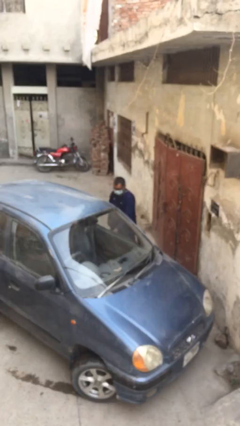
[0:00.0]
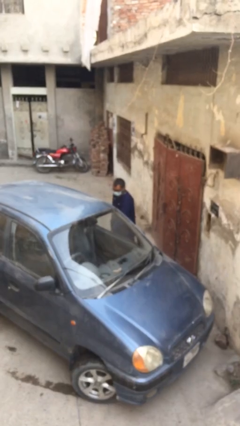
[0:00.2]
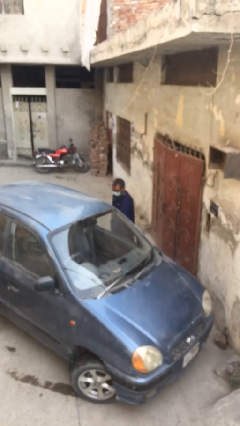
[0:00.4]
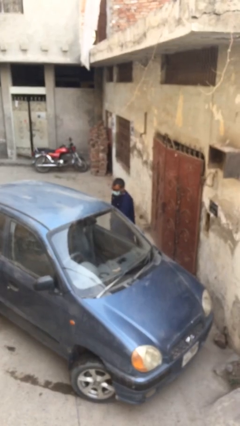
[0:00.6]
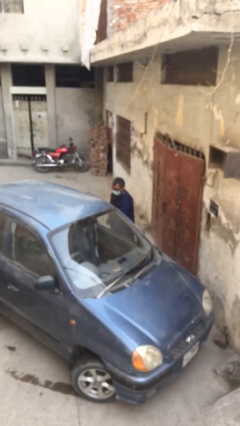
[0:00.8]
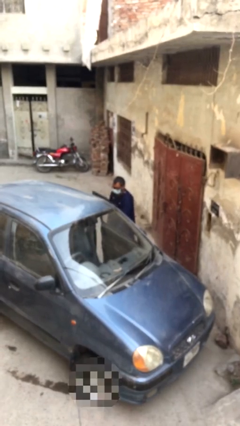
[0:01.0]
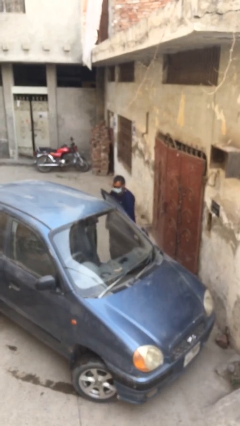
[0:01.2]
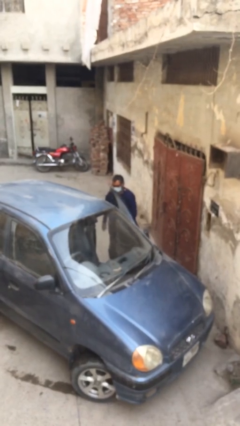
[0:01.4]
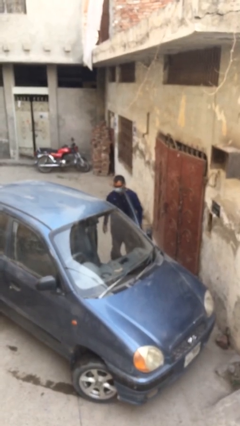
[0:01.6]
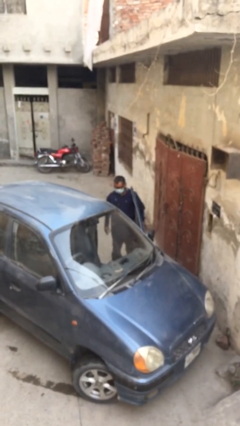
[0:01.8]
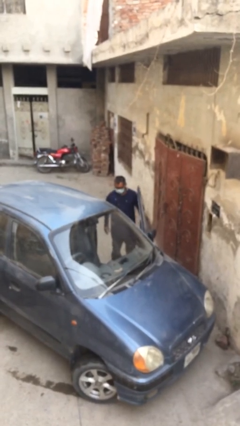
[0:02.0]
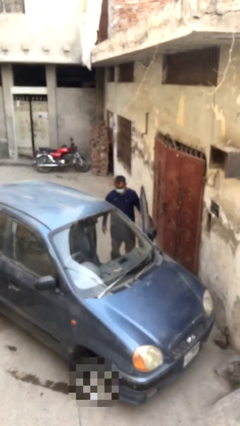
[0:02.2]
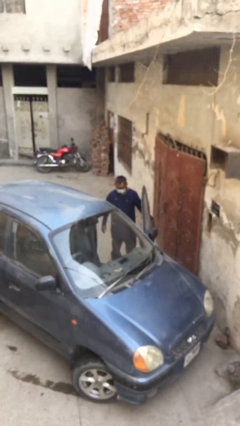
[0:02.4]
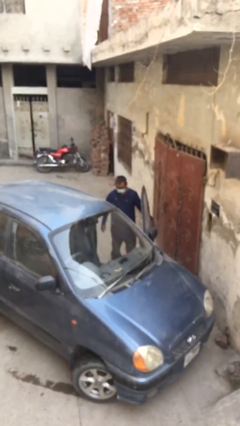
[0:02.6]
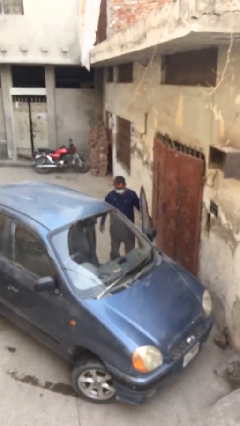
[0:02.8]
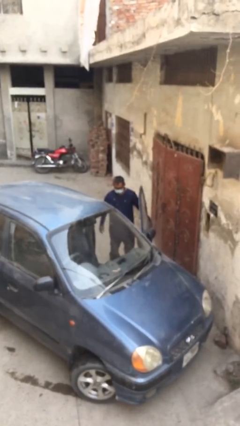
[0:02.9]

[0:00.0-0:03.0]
person opens car door

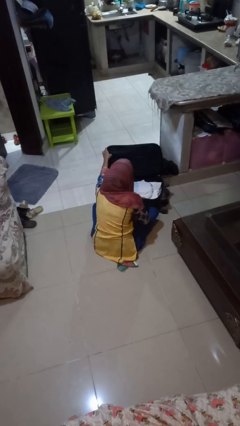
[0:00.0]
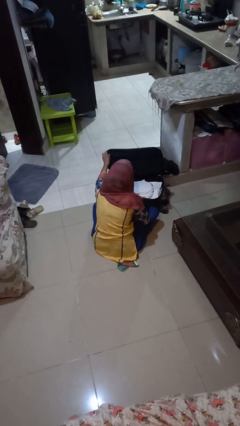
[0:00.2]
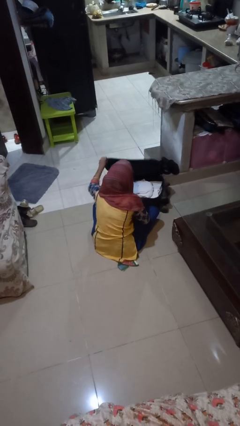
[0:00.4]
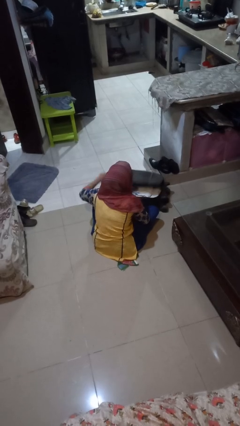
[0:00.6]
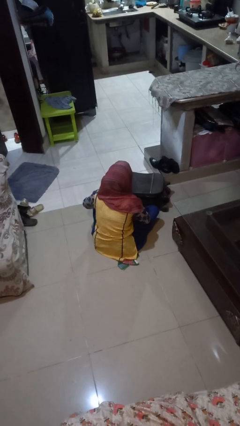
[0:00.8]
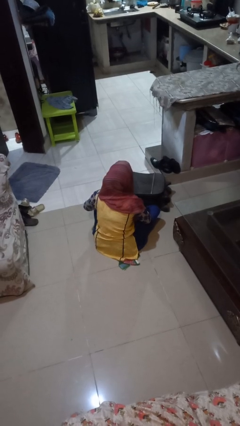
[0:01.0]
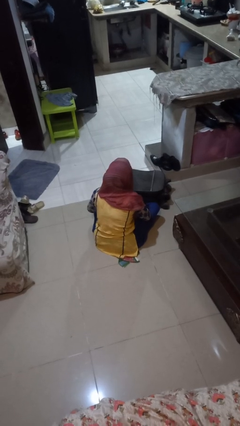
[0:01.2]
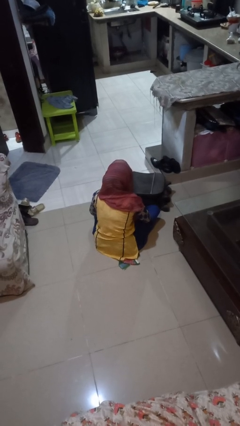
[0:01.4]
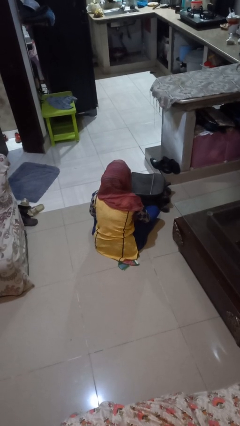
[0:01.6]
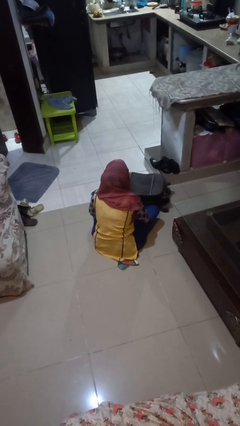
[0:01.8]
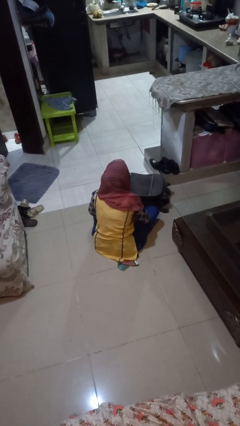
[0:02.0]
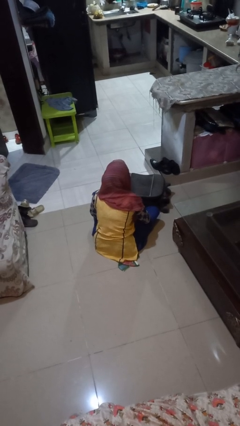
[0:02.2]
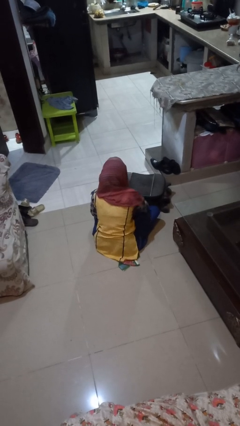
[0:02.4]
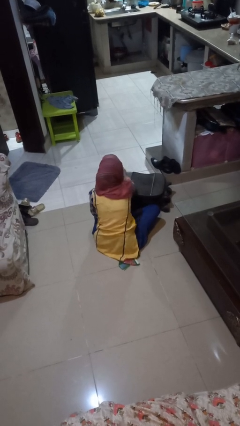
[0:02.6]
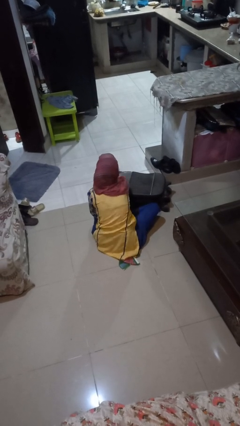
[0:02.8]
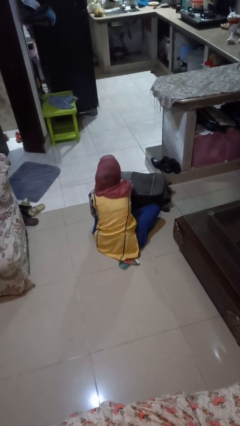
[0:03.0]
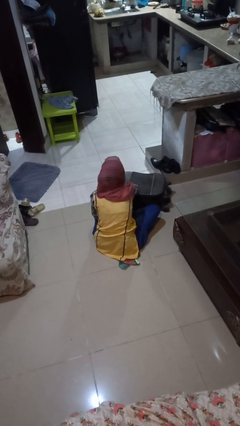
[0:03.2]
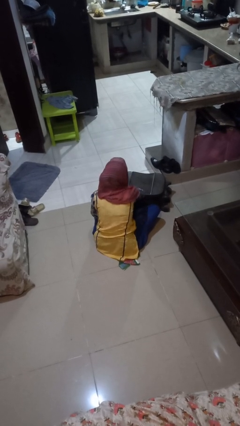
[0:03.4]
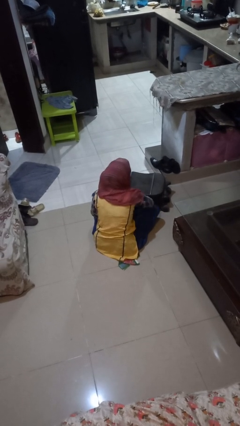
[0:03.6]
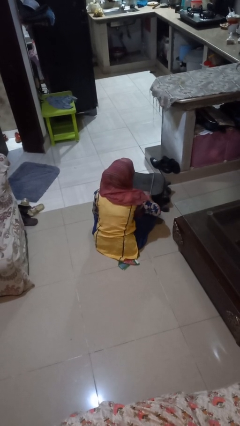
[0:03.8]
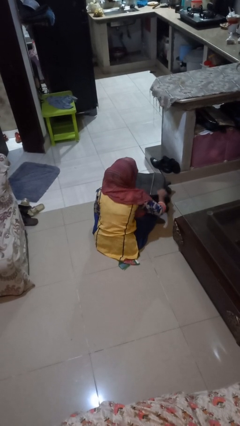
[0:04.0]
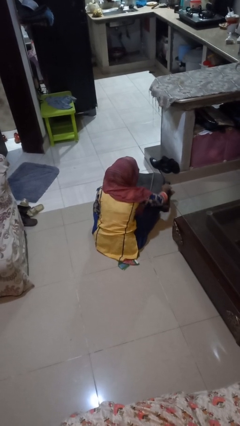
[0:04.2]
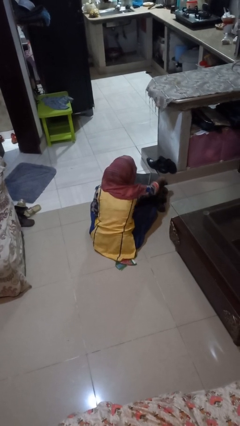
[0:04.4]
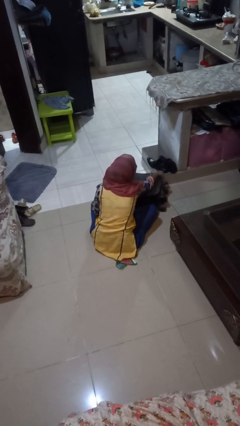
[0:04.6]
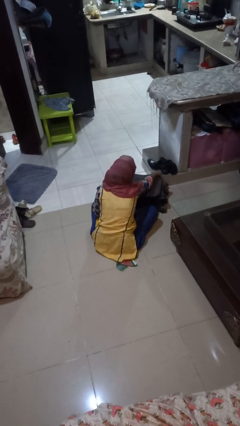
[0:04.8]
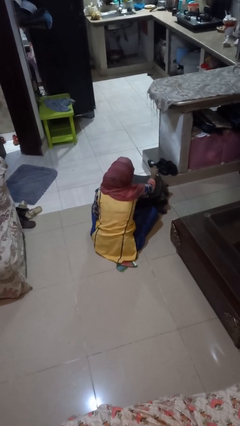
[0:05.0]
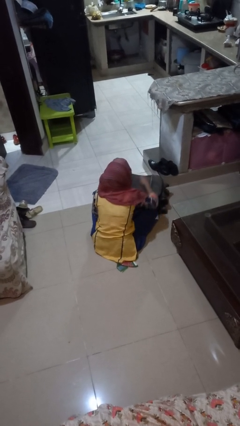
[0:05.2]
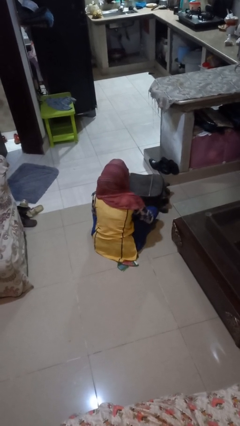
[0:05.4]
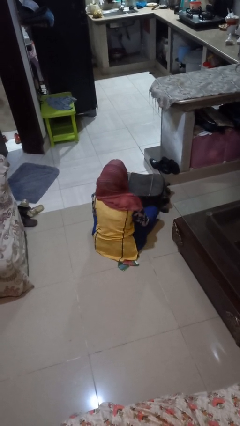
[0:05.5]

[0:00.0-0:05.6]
person closes suitcase

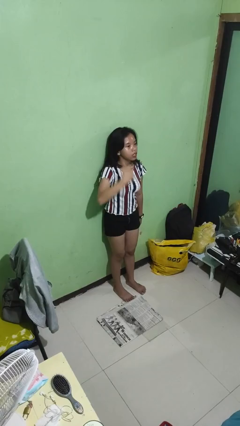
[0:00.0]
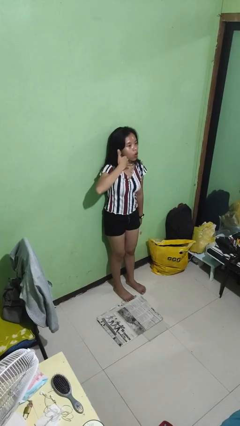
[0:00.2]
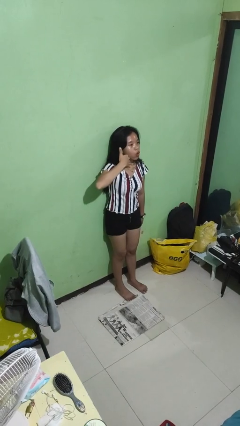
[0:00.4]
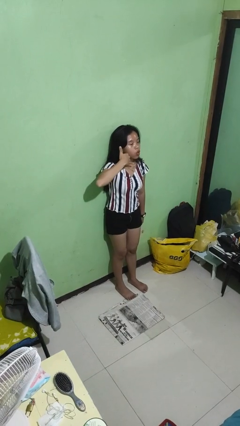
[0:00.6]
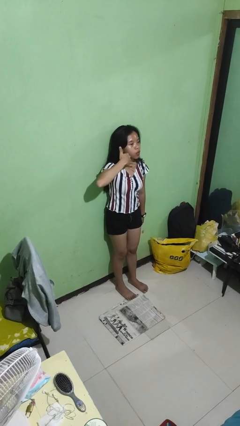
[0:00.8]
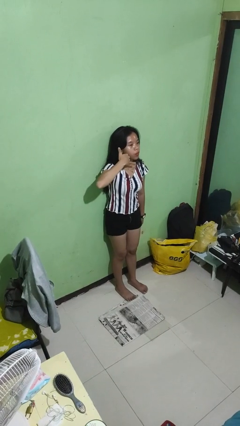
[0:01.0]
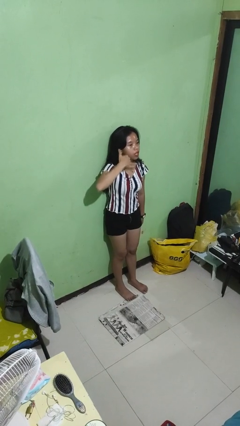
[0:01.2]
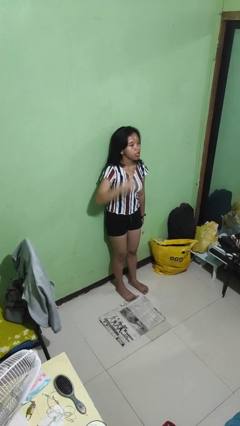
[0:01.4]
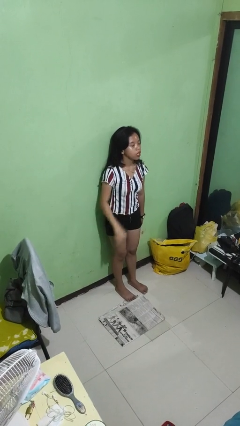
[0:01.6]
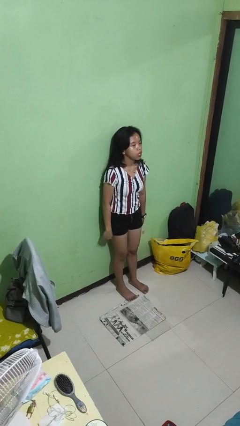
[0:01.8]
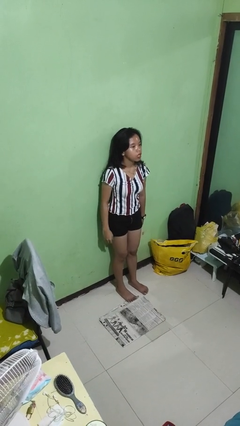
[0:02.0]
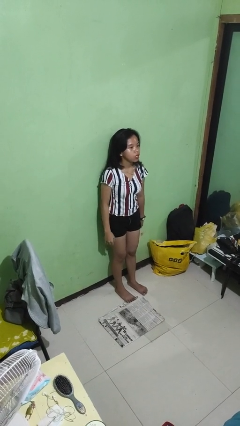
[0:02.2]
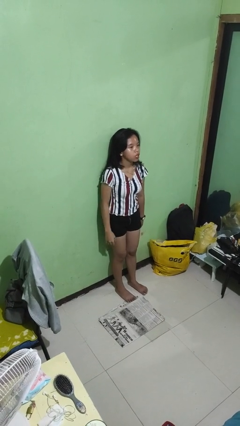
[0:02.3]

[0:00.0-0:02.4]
person throws object into air

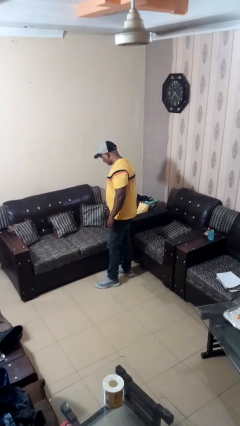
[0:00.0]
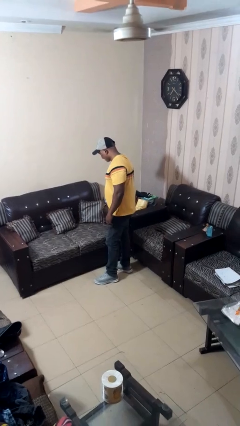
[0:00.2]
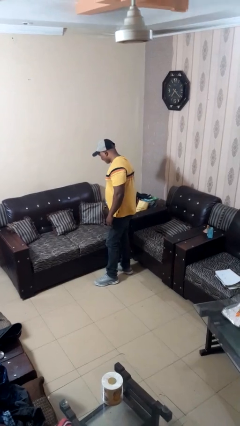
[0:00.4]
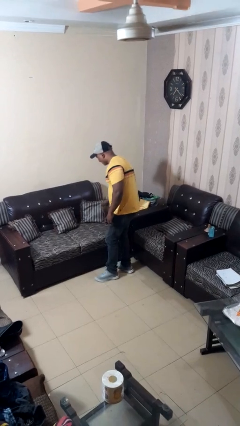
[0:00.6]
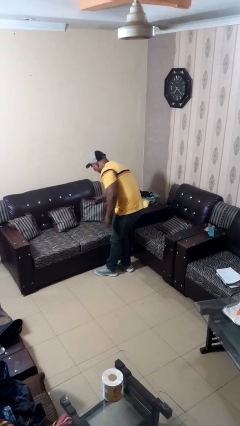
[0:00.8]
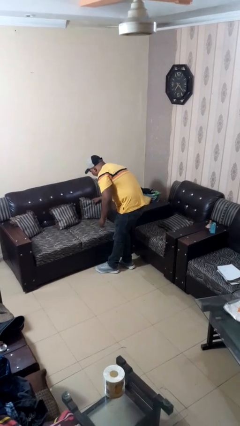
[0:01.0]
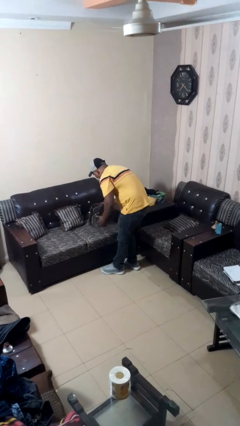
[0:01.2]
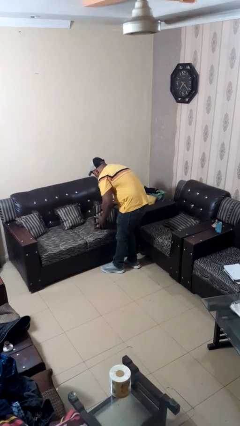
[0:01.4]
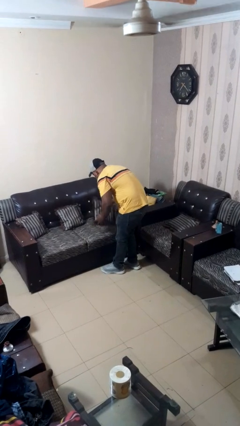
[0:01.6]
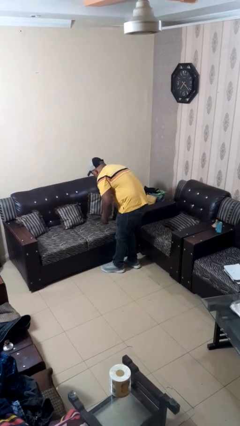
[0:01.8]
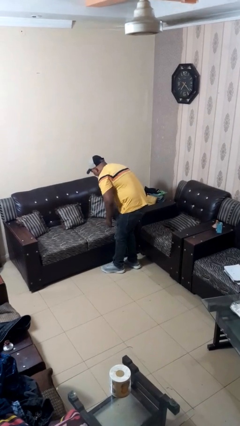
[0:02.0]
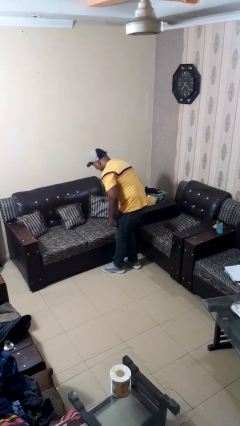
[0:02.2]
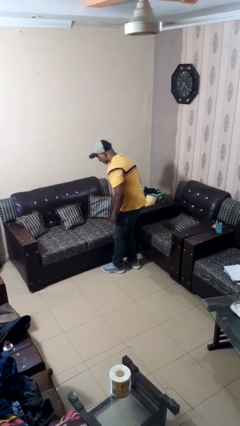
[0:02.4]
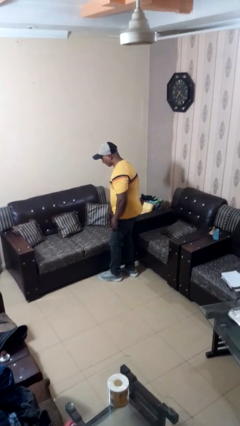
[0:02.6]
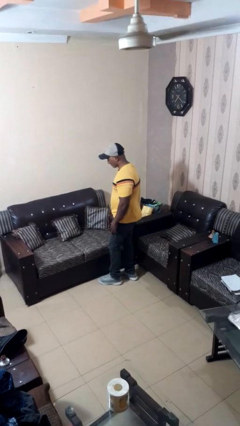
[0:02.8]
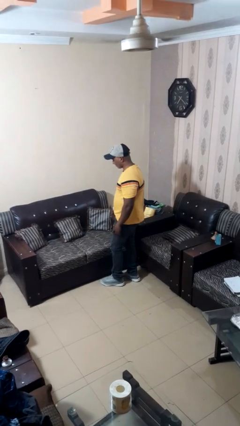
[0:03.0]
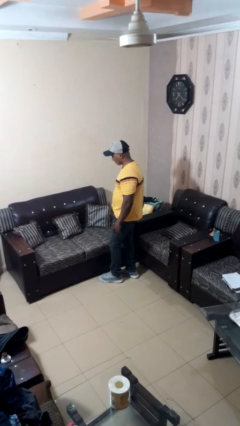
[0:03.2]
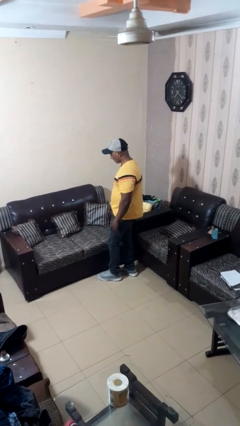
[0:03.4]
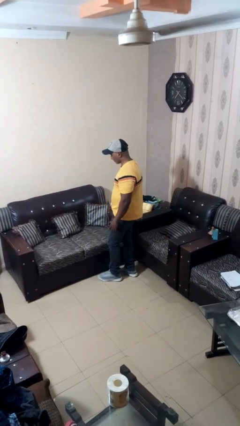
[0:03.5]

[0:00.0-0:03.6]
person searches in couch

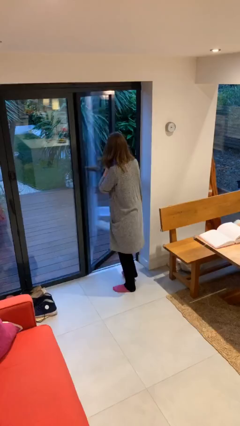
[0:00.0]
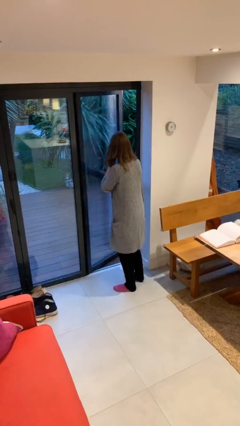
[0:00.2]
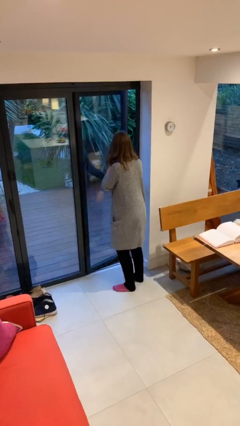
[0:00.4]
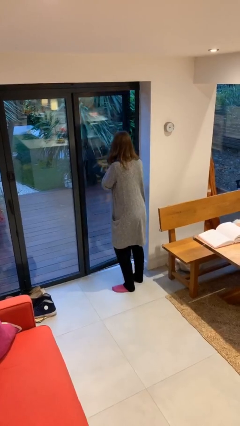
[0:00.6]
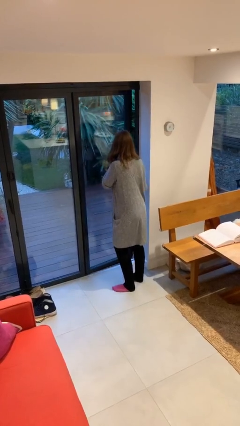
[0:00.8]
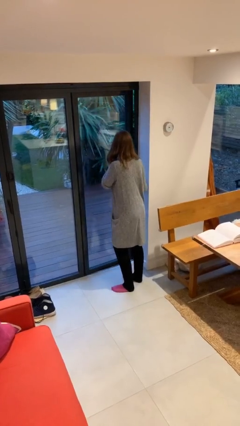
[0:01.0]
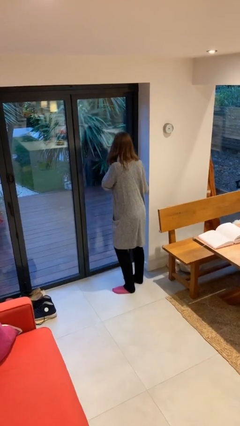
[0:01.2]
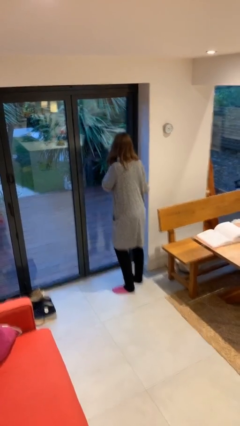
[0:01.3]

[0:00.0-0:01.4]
person closes facility door

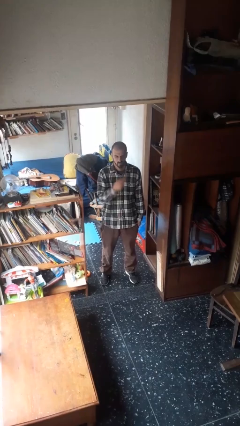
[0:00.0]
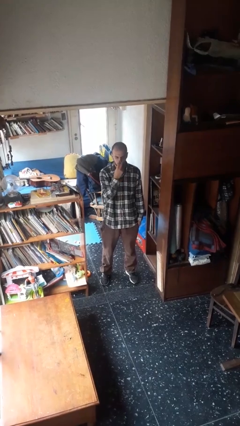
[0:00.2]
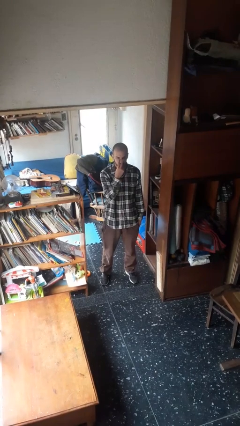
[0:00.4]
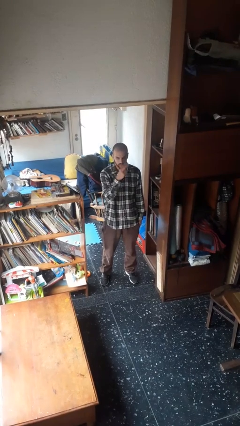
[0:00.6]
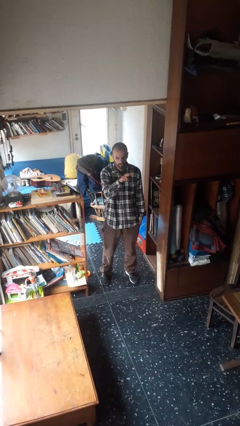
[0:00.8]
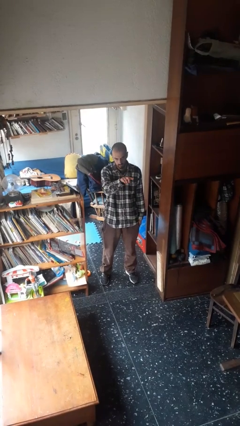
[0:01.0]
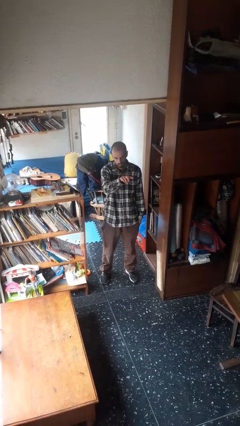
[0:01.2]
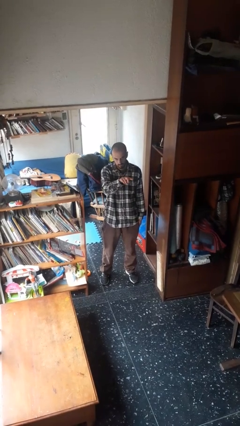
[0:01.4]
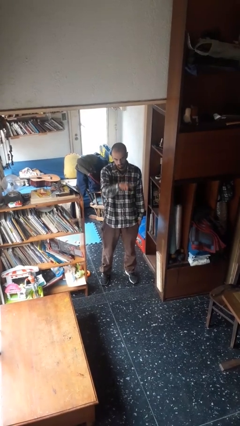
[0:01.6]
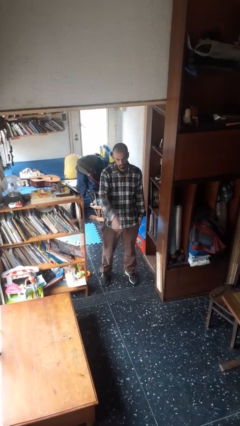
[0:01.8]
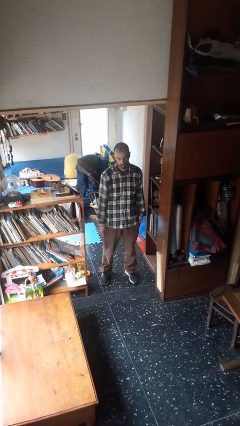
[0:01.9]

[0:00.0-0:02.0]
person gestures watch closely
